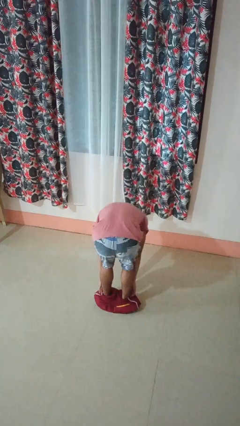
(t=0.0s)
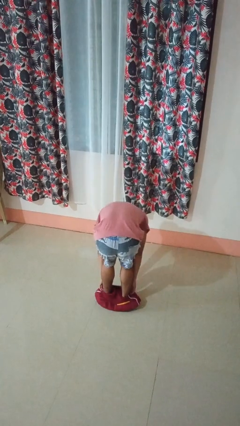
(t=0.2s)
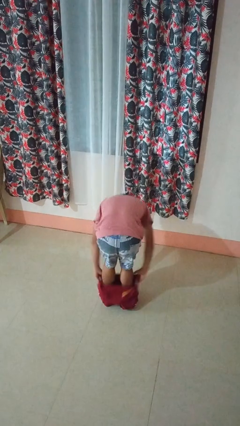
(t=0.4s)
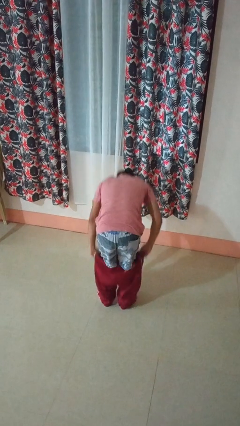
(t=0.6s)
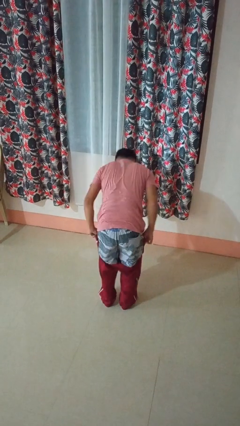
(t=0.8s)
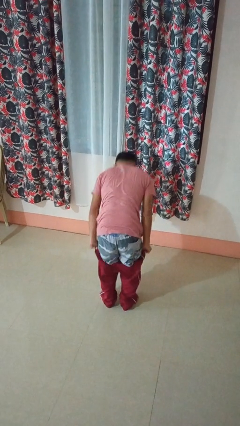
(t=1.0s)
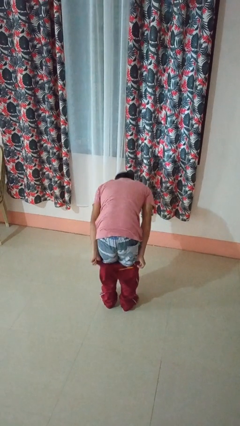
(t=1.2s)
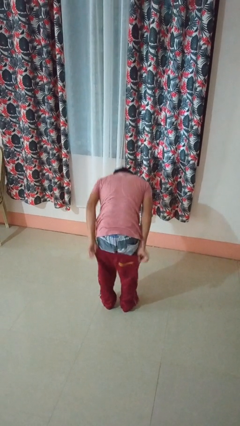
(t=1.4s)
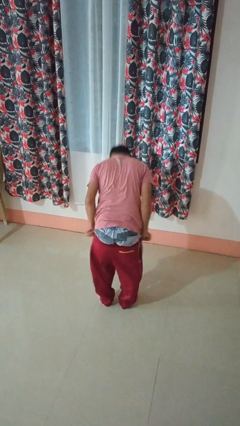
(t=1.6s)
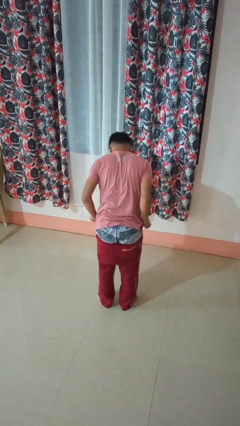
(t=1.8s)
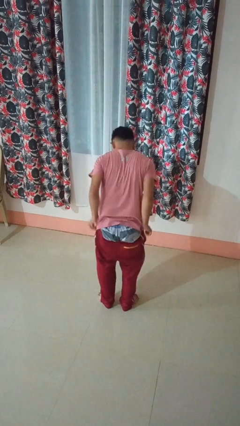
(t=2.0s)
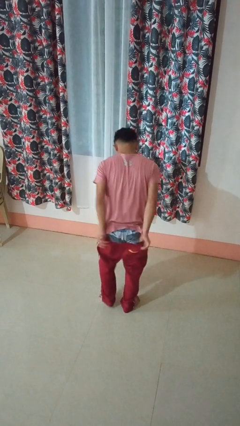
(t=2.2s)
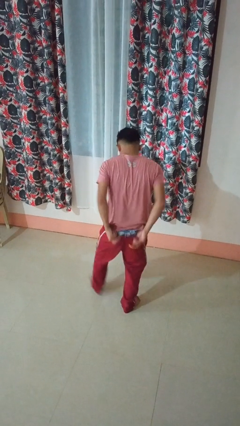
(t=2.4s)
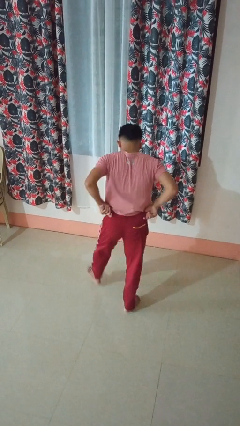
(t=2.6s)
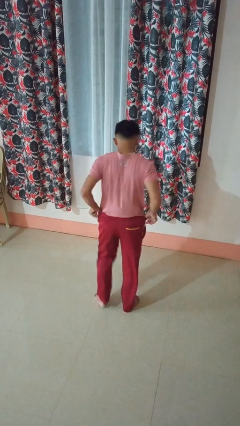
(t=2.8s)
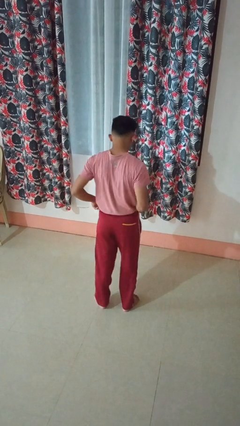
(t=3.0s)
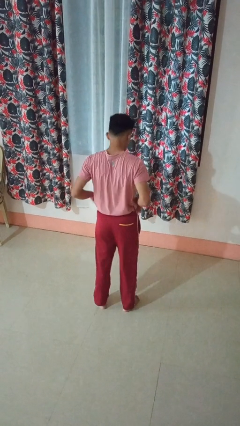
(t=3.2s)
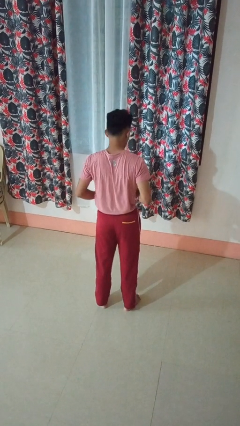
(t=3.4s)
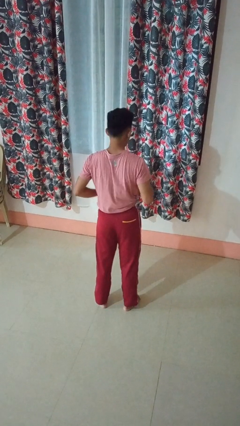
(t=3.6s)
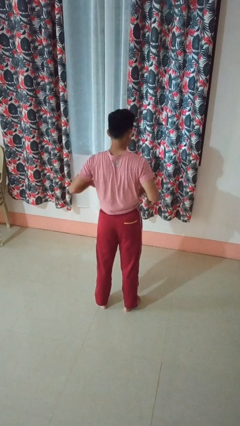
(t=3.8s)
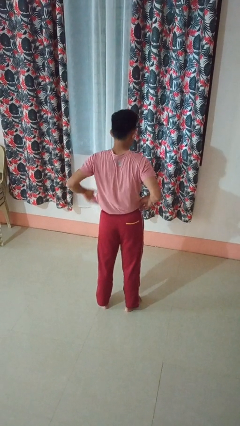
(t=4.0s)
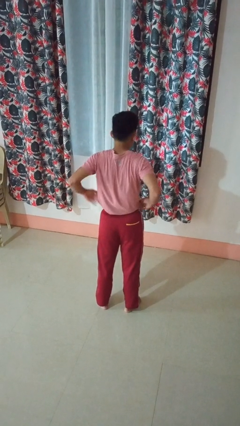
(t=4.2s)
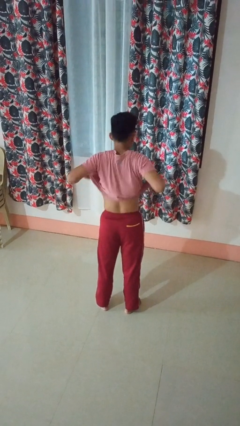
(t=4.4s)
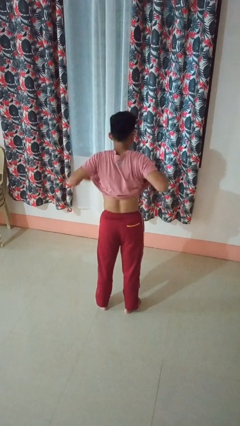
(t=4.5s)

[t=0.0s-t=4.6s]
person puts on pants

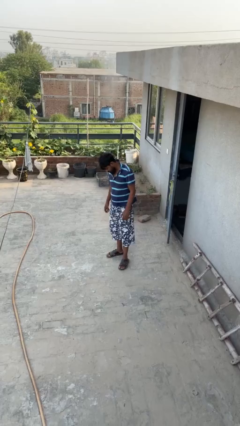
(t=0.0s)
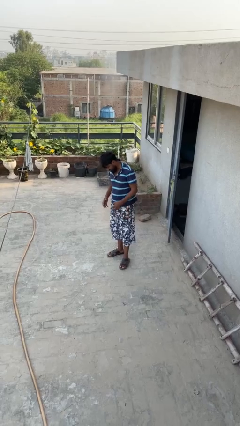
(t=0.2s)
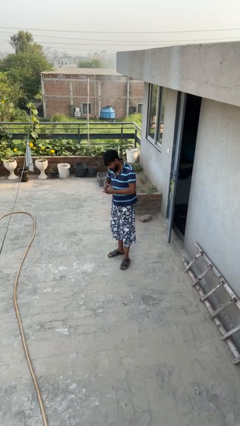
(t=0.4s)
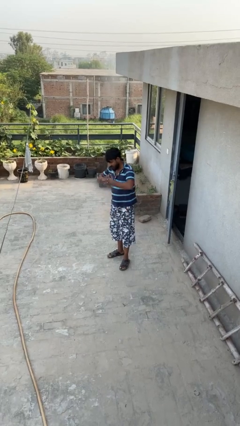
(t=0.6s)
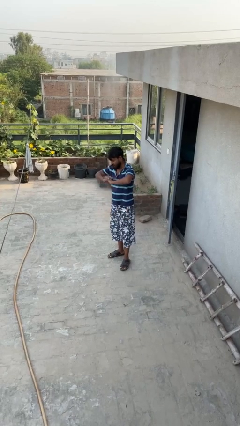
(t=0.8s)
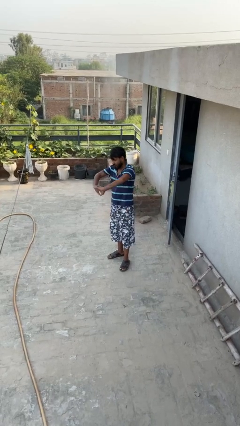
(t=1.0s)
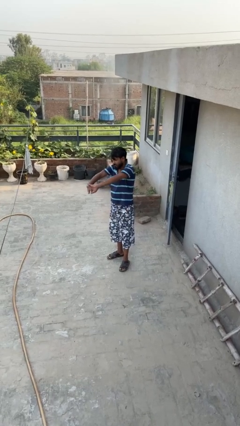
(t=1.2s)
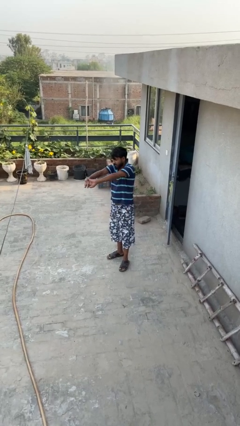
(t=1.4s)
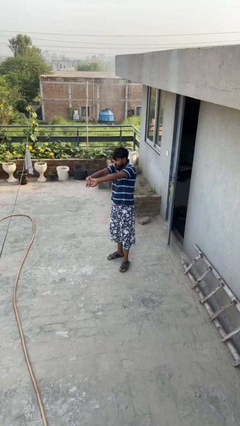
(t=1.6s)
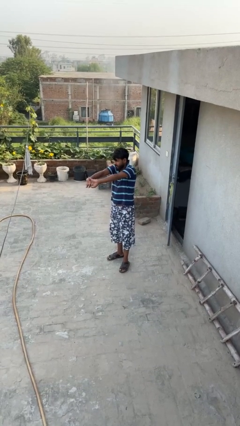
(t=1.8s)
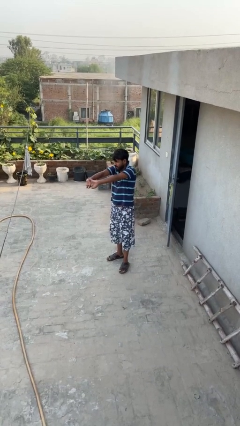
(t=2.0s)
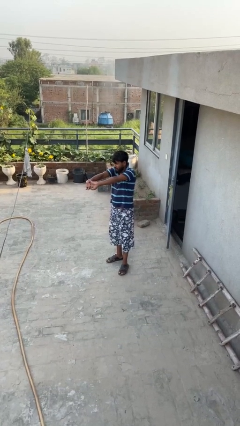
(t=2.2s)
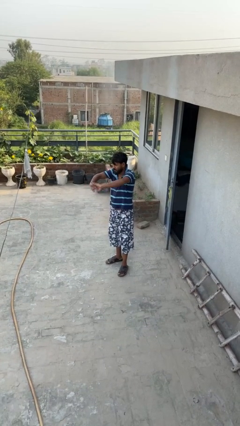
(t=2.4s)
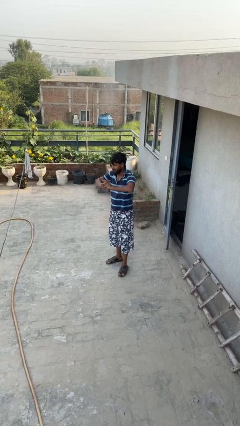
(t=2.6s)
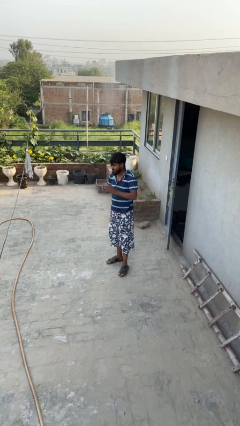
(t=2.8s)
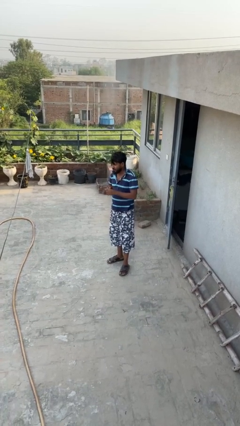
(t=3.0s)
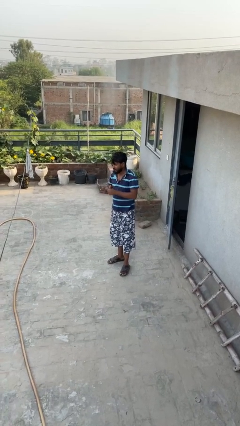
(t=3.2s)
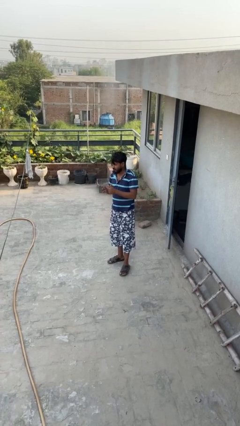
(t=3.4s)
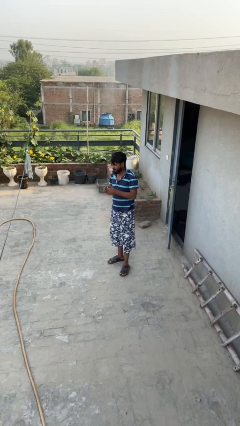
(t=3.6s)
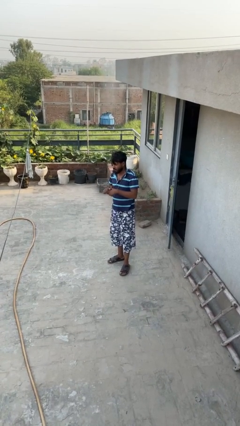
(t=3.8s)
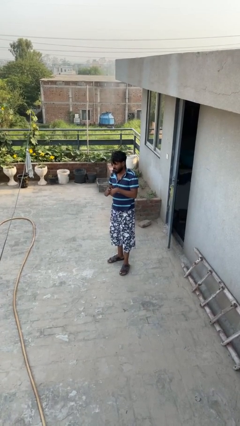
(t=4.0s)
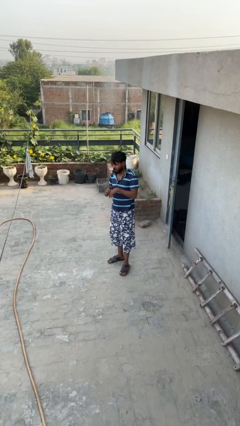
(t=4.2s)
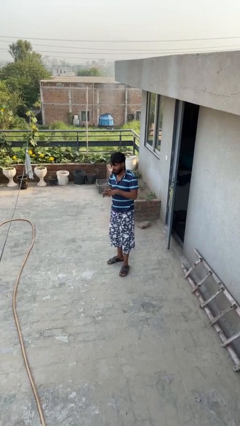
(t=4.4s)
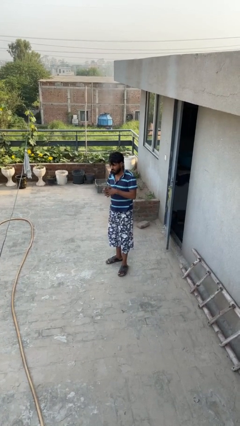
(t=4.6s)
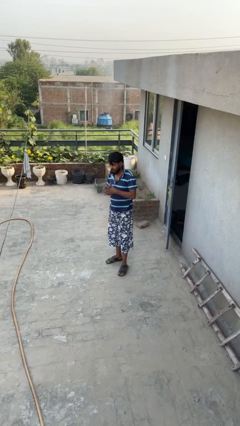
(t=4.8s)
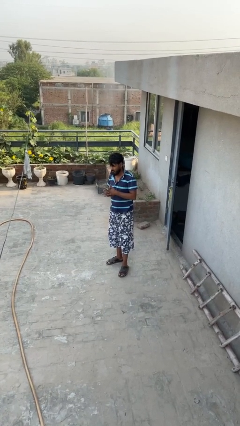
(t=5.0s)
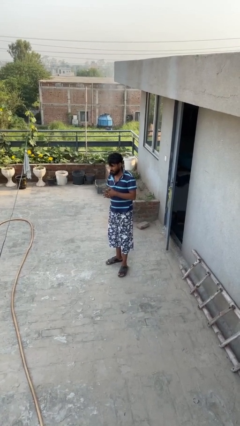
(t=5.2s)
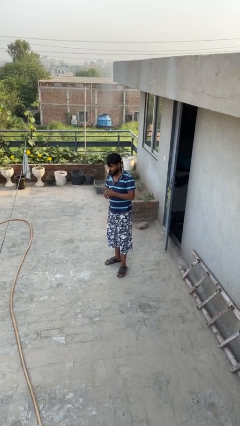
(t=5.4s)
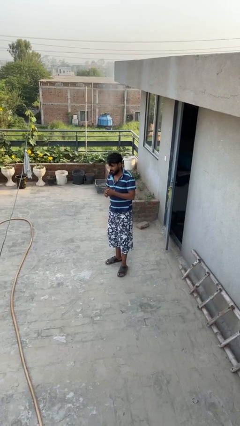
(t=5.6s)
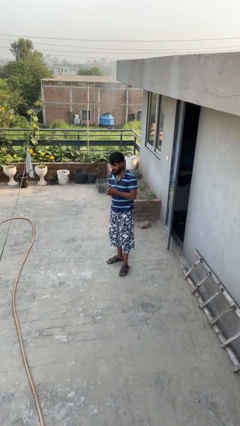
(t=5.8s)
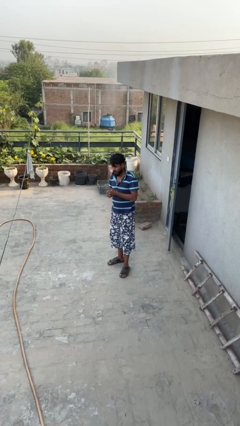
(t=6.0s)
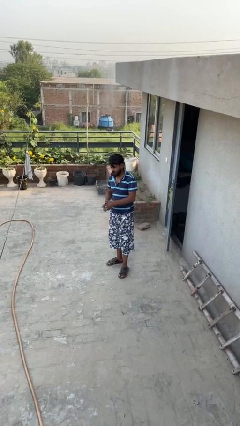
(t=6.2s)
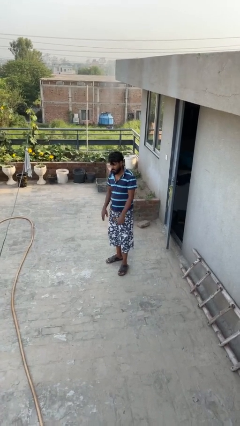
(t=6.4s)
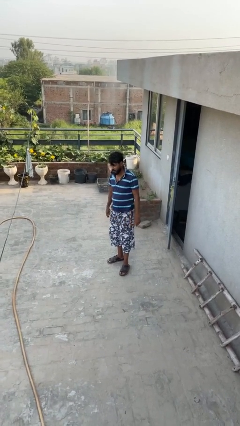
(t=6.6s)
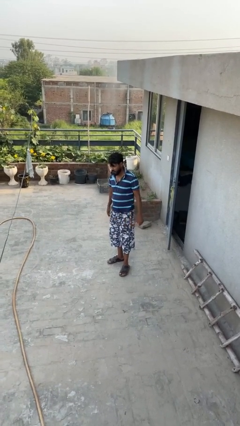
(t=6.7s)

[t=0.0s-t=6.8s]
person cracks knuckles

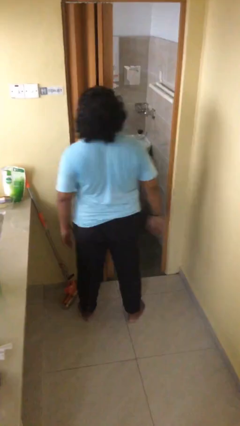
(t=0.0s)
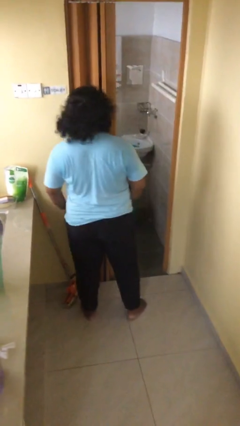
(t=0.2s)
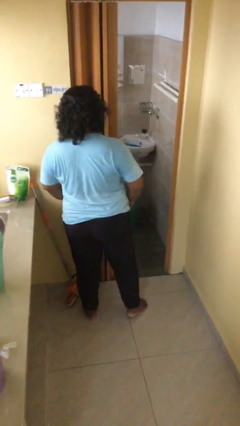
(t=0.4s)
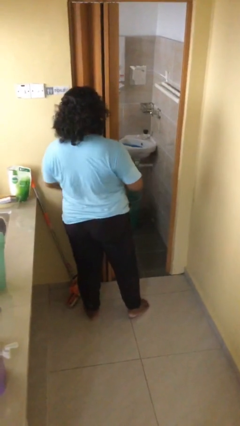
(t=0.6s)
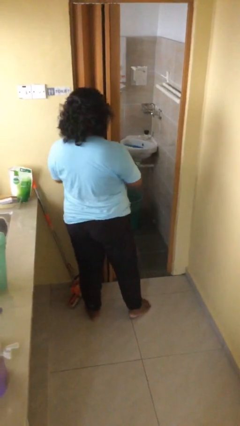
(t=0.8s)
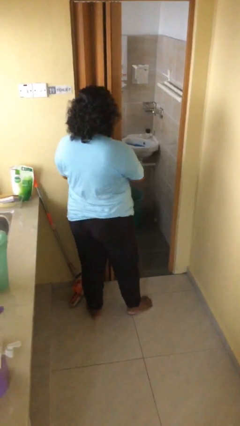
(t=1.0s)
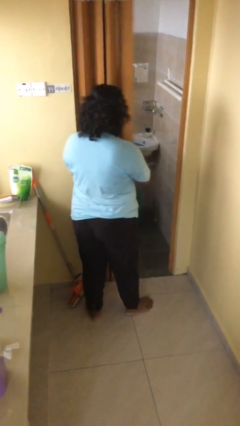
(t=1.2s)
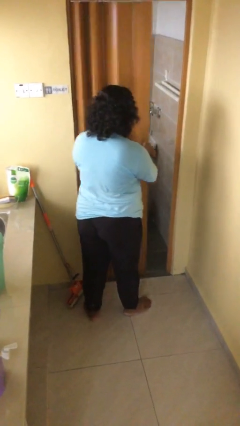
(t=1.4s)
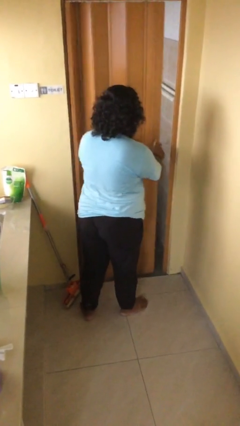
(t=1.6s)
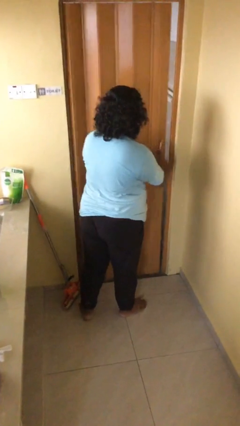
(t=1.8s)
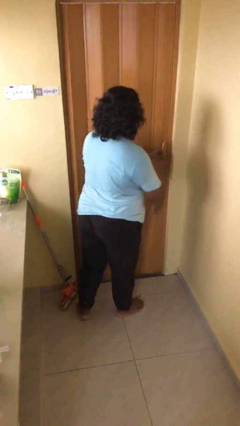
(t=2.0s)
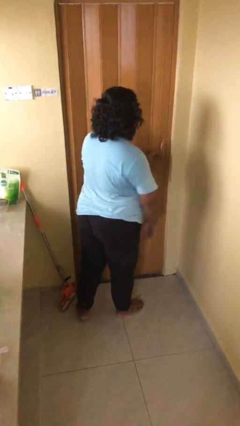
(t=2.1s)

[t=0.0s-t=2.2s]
person closes sliding door

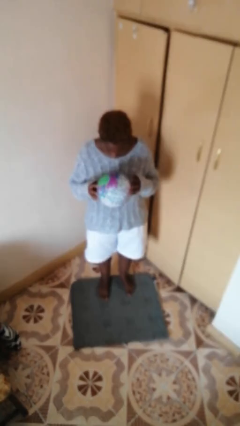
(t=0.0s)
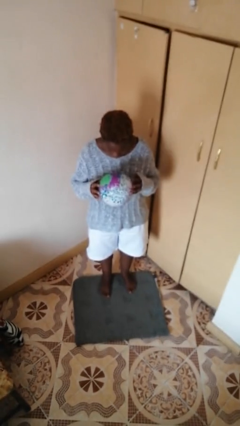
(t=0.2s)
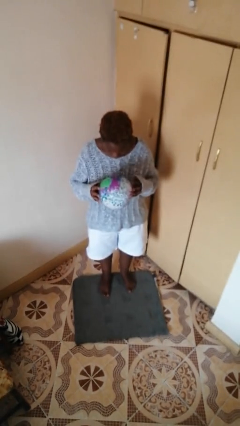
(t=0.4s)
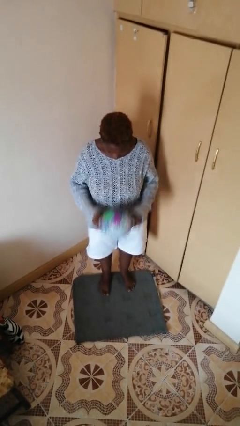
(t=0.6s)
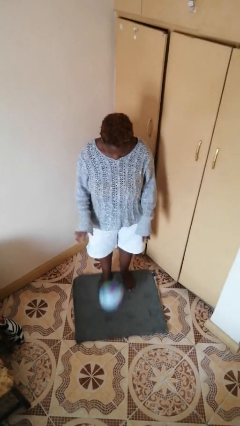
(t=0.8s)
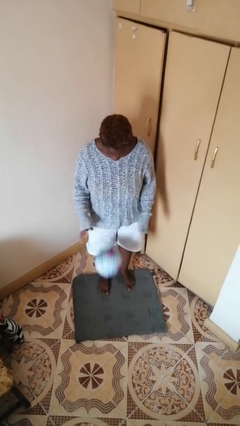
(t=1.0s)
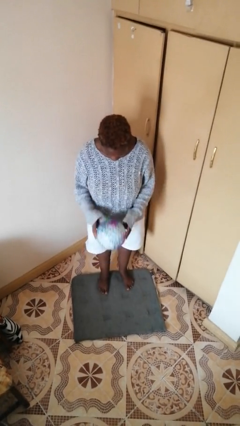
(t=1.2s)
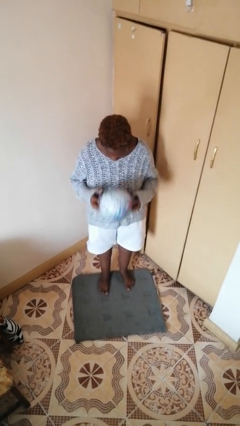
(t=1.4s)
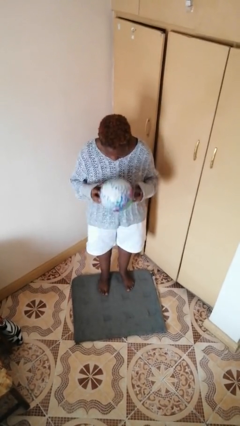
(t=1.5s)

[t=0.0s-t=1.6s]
person bounces ball on floor

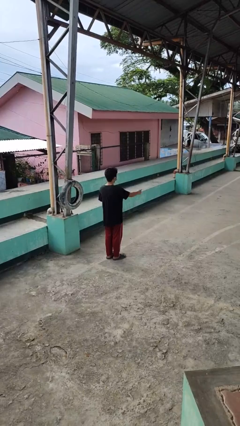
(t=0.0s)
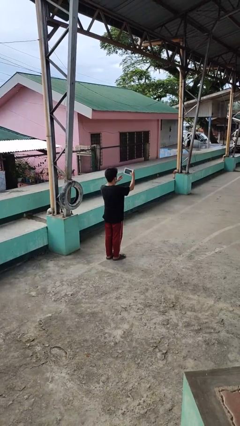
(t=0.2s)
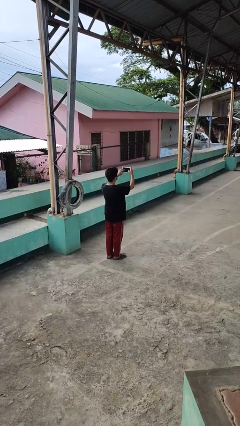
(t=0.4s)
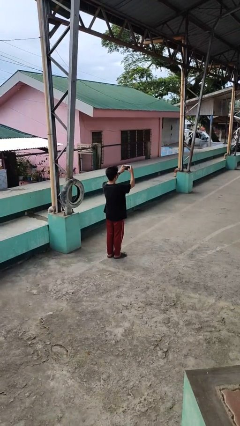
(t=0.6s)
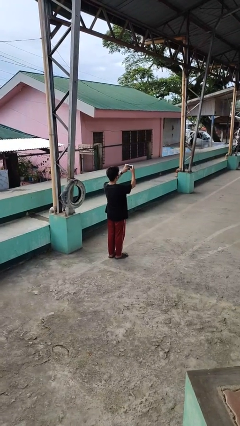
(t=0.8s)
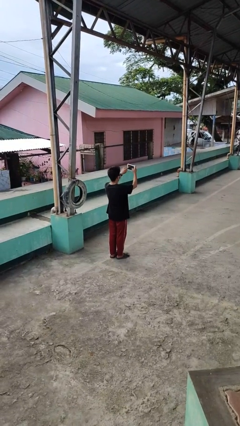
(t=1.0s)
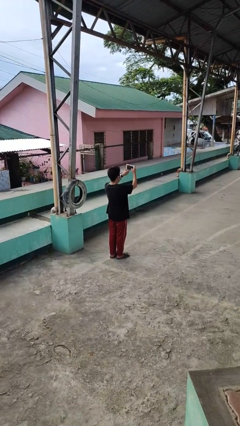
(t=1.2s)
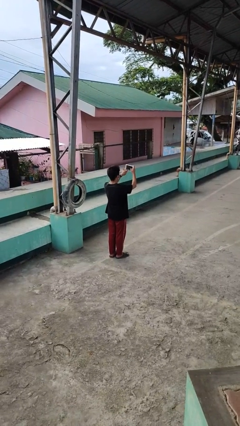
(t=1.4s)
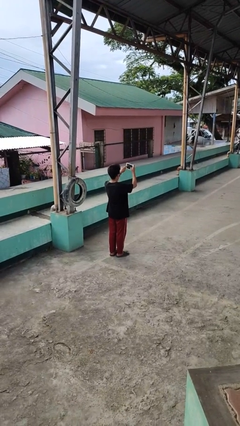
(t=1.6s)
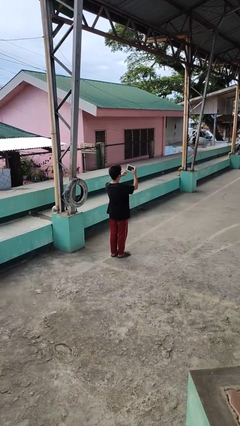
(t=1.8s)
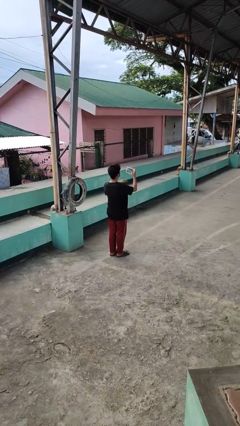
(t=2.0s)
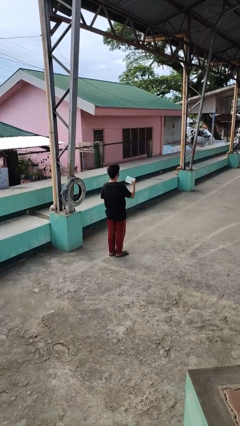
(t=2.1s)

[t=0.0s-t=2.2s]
person interacts with tablet
